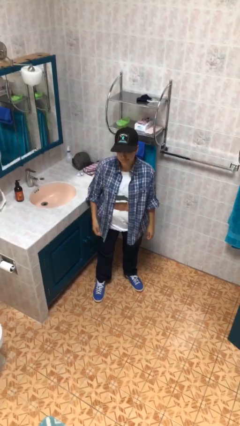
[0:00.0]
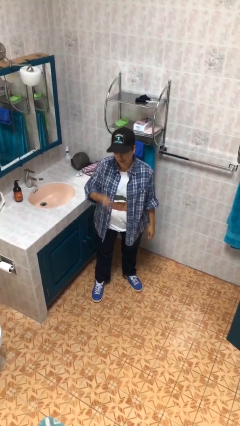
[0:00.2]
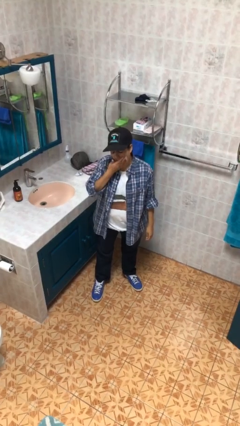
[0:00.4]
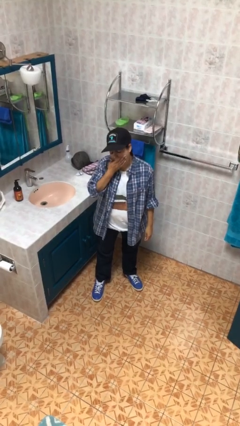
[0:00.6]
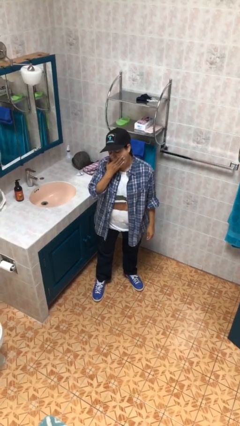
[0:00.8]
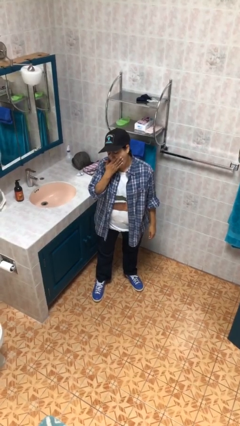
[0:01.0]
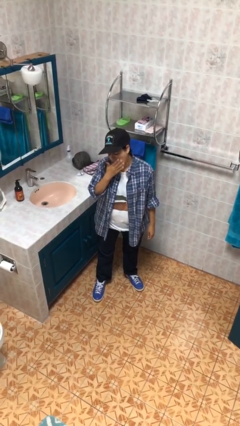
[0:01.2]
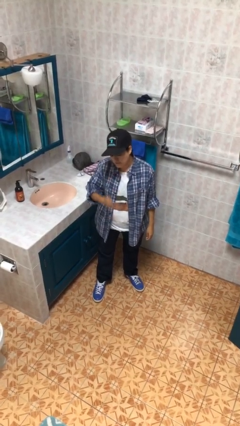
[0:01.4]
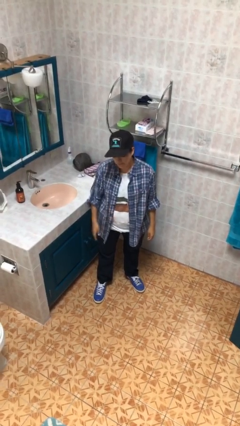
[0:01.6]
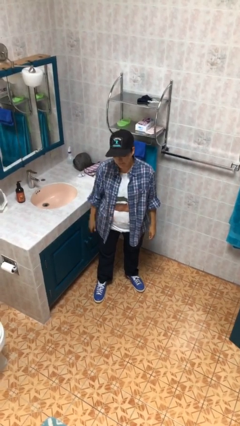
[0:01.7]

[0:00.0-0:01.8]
person yawns

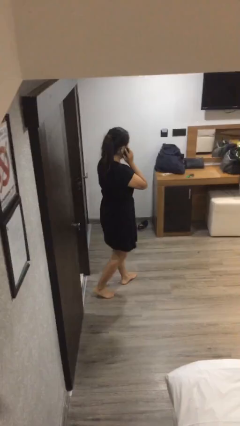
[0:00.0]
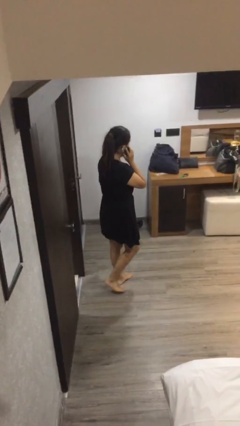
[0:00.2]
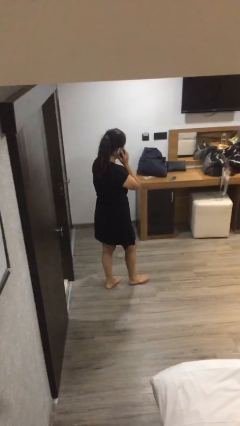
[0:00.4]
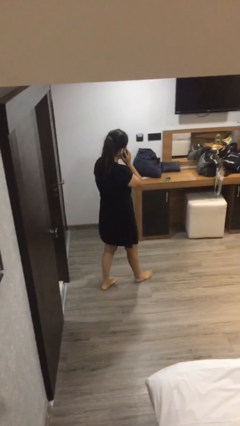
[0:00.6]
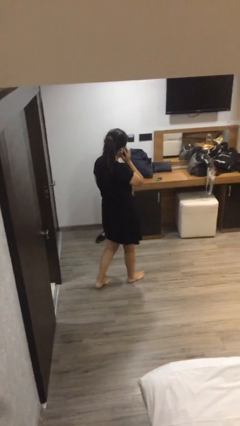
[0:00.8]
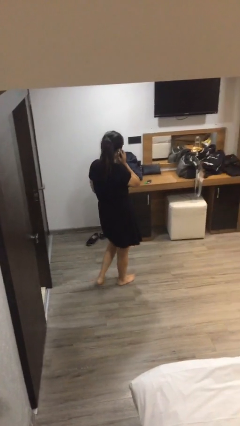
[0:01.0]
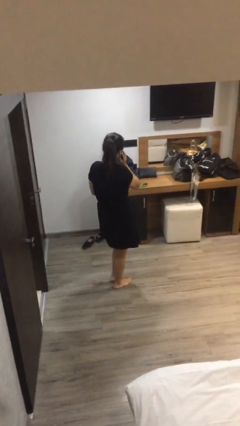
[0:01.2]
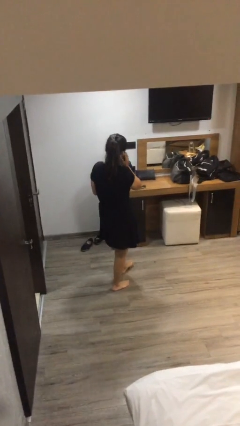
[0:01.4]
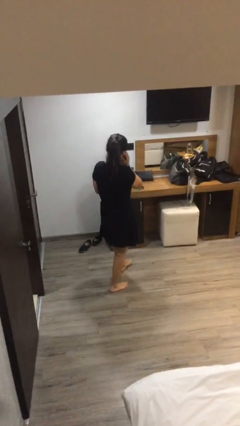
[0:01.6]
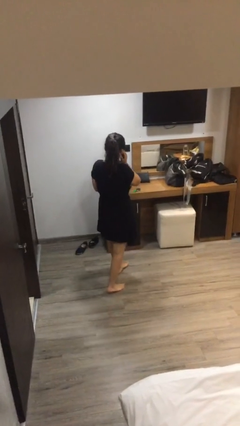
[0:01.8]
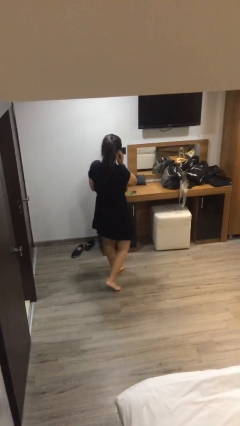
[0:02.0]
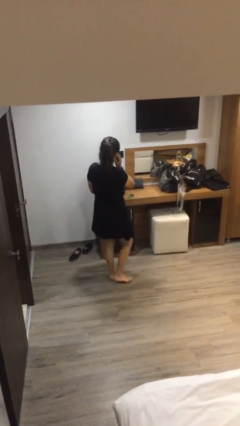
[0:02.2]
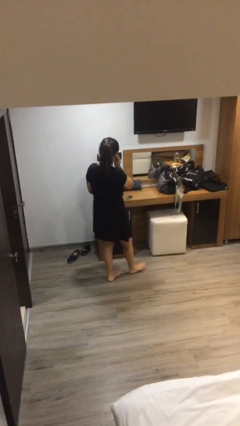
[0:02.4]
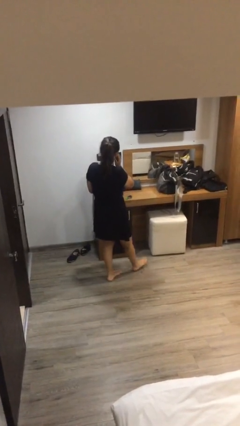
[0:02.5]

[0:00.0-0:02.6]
person enters scene through structure

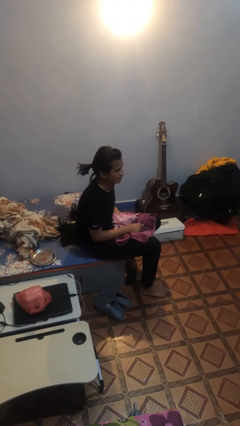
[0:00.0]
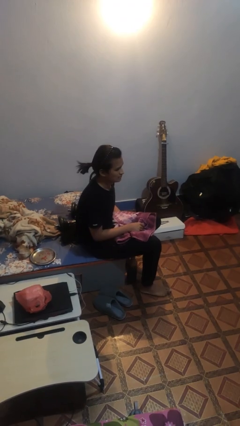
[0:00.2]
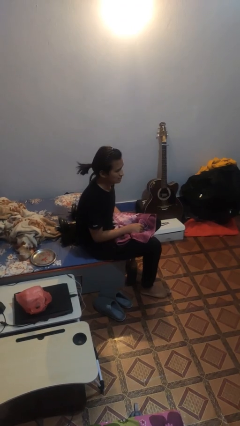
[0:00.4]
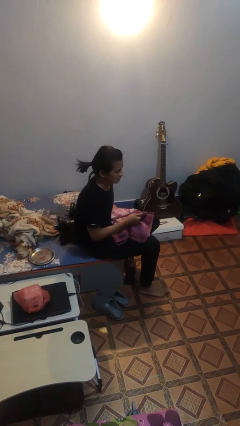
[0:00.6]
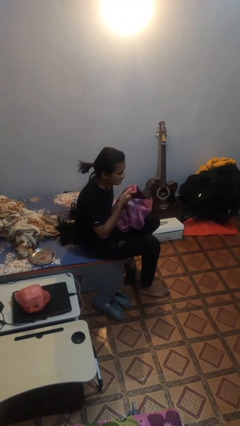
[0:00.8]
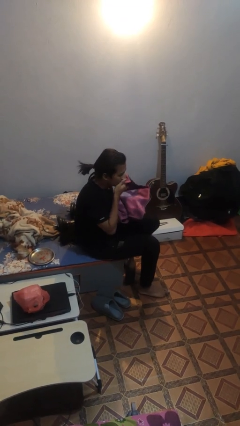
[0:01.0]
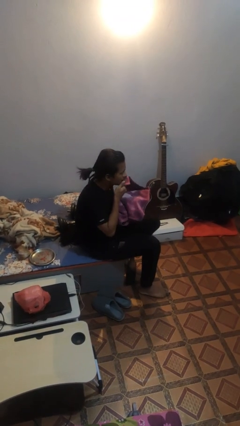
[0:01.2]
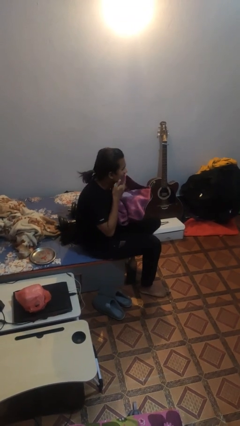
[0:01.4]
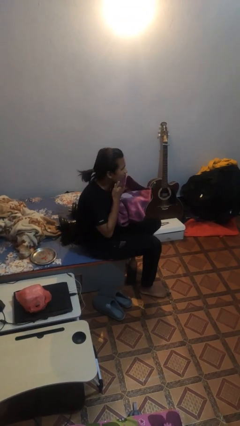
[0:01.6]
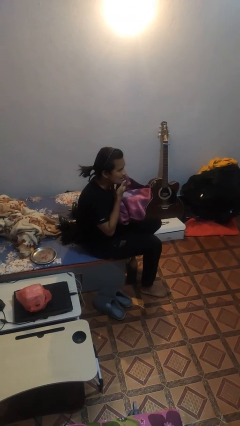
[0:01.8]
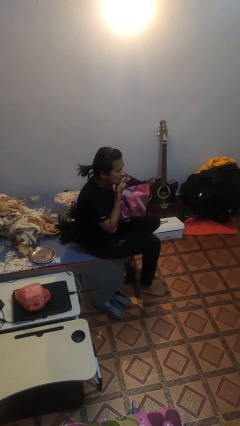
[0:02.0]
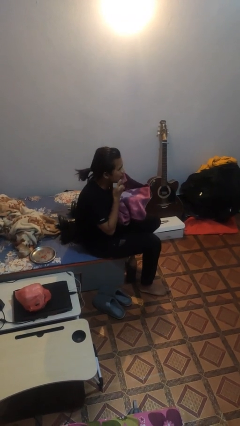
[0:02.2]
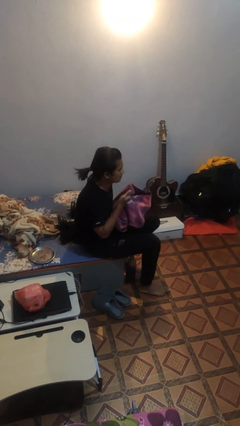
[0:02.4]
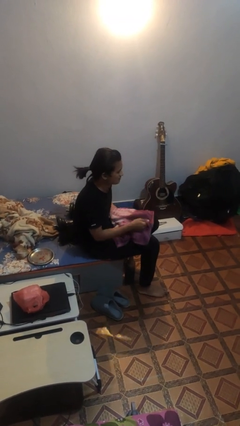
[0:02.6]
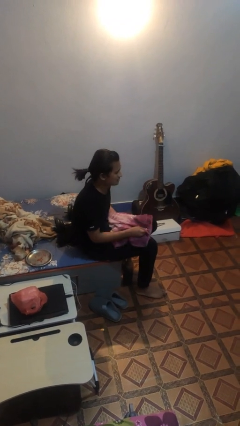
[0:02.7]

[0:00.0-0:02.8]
person wipes mouth with napkin

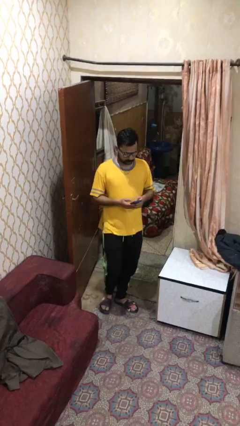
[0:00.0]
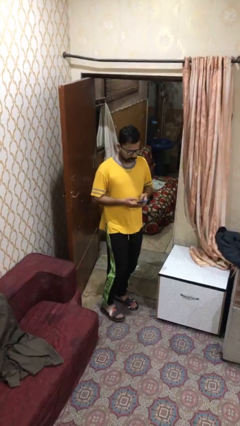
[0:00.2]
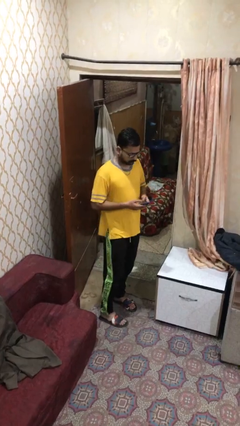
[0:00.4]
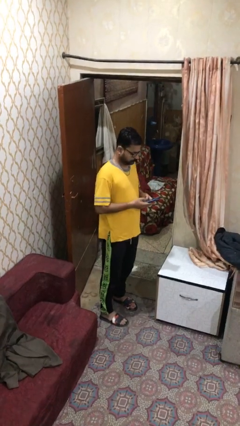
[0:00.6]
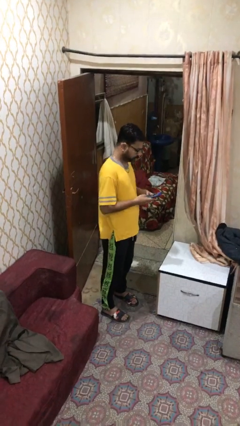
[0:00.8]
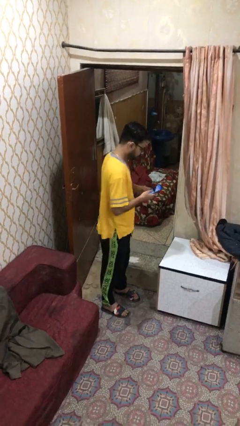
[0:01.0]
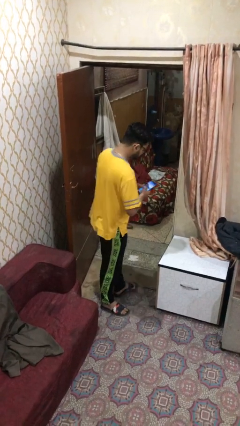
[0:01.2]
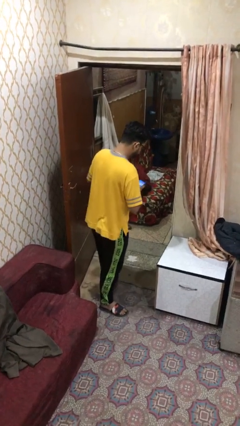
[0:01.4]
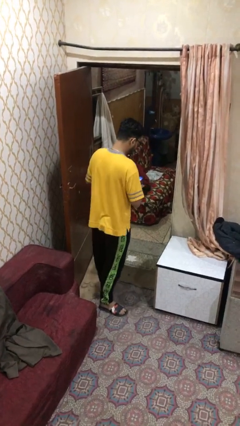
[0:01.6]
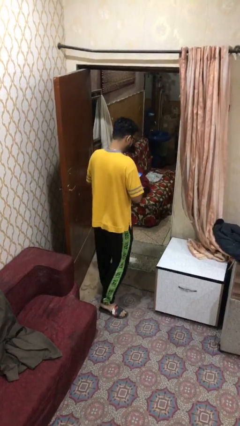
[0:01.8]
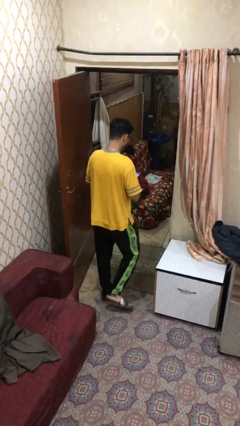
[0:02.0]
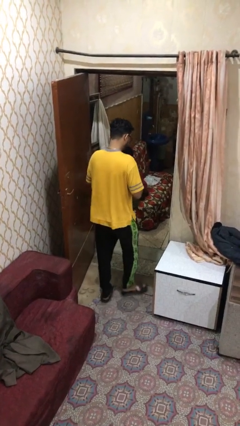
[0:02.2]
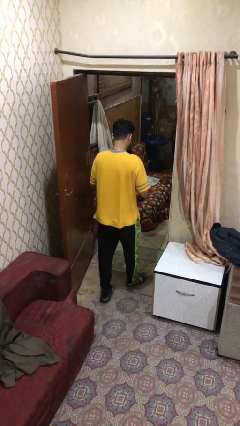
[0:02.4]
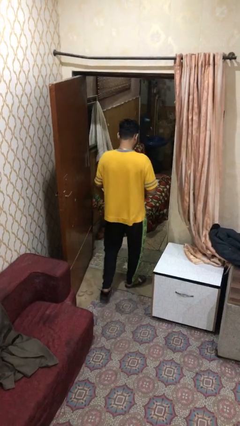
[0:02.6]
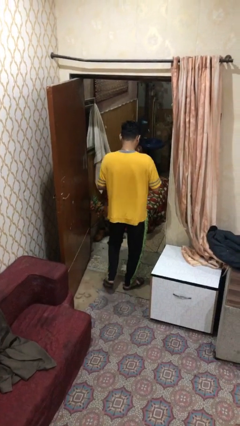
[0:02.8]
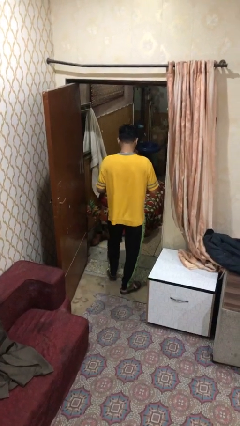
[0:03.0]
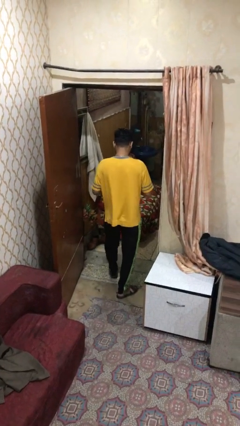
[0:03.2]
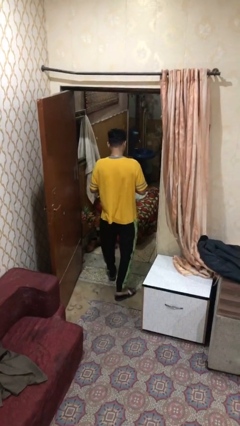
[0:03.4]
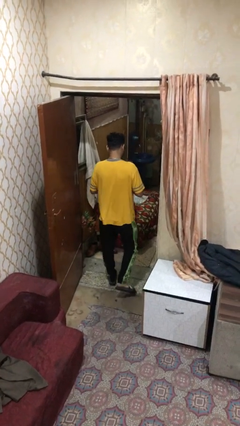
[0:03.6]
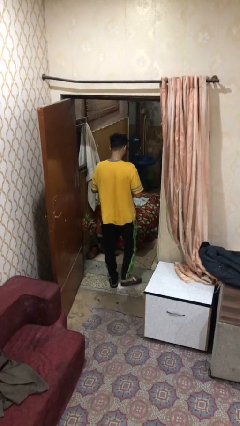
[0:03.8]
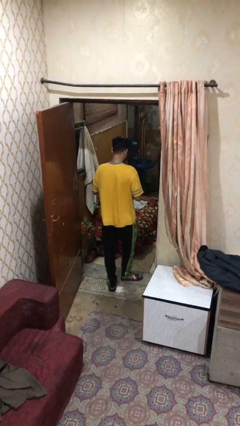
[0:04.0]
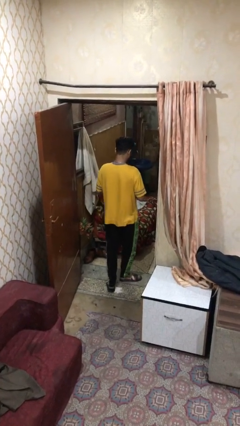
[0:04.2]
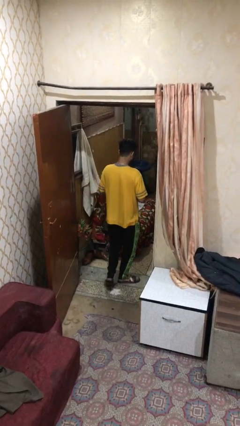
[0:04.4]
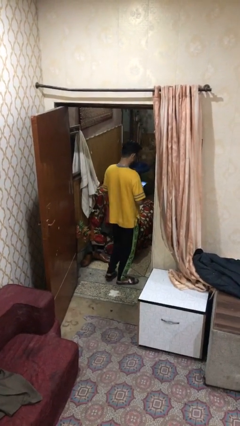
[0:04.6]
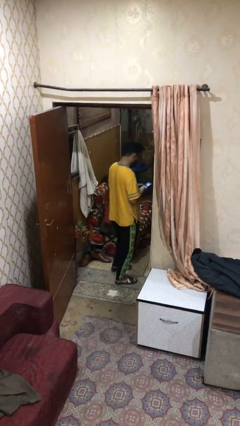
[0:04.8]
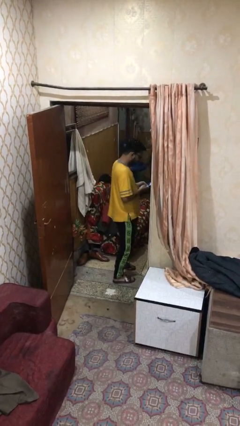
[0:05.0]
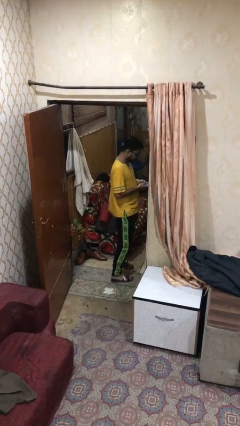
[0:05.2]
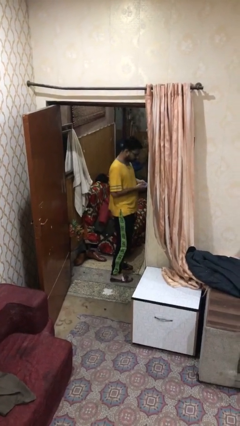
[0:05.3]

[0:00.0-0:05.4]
person exits scene through structure

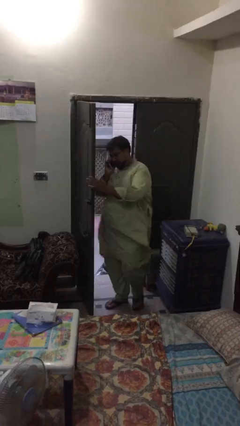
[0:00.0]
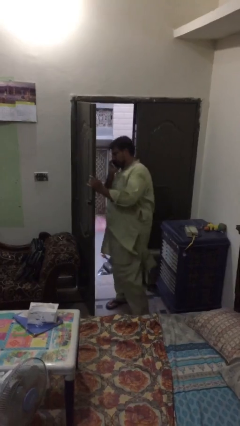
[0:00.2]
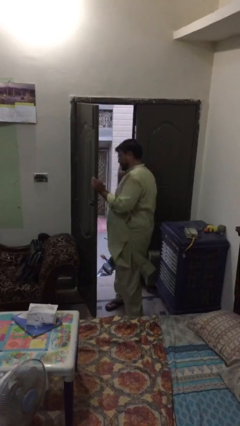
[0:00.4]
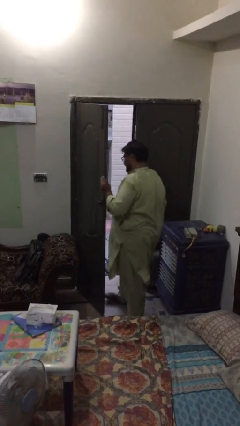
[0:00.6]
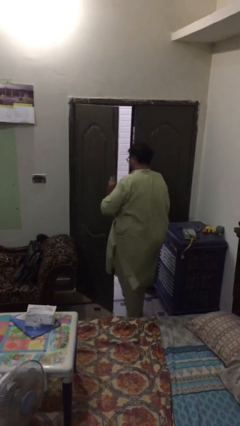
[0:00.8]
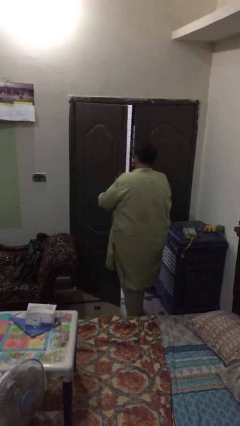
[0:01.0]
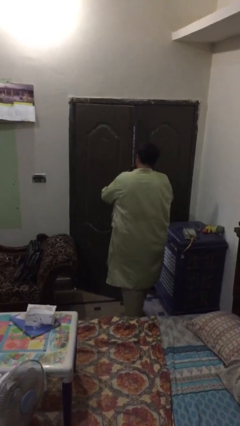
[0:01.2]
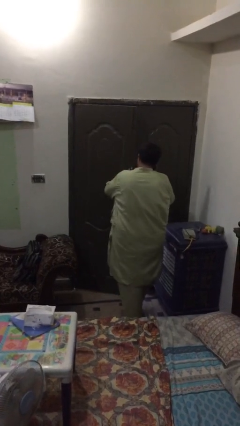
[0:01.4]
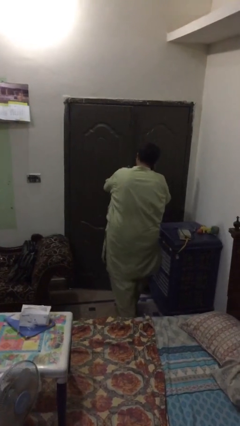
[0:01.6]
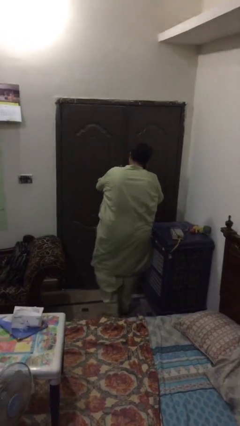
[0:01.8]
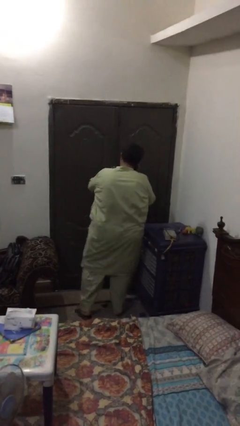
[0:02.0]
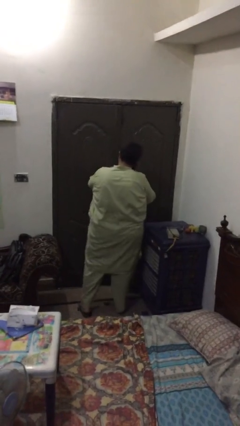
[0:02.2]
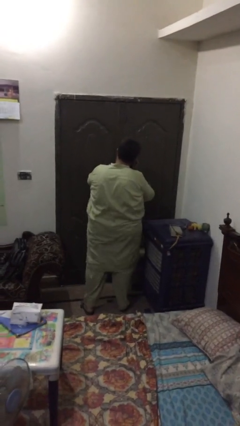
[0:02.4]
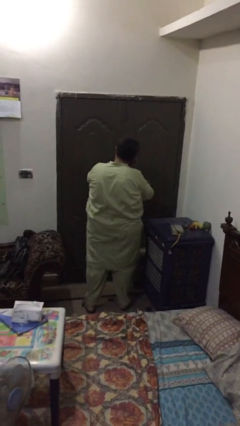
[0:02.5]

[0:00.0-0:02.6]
person closes facility door

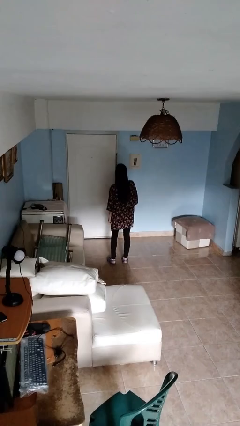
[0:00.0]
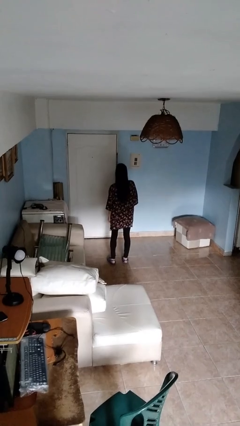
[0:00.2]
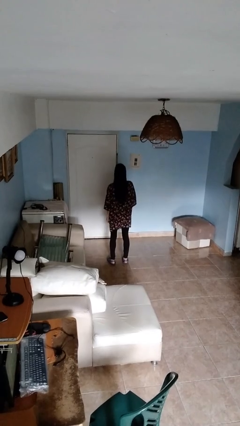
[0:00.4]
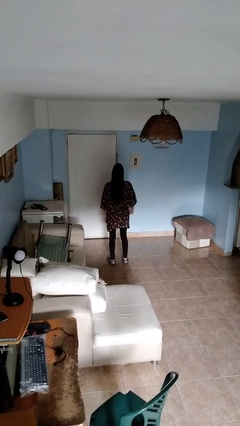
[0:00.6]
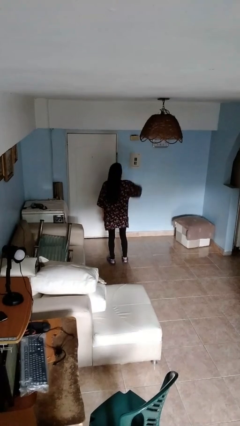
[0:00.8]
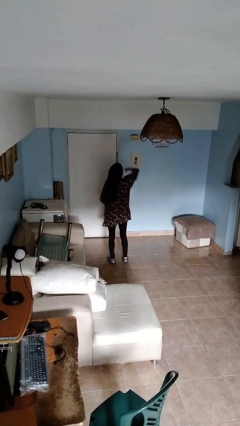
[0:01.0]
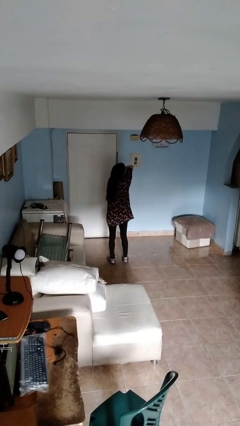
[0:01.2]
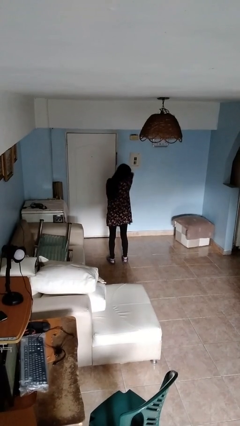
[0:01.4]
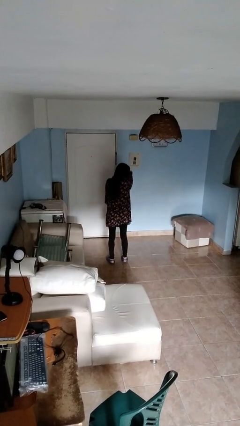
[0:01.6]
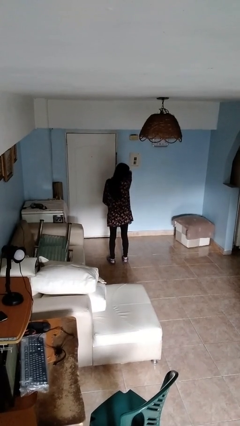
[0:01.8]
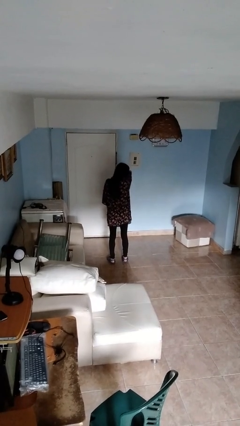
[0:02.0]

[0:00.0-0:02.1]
person sneezes into arm
